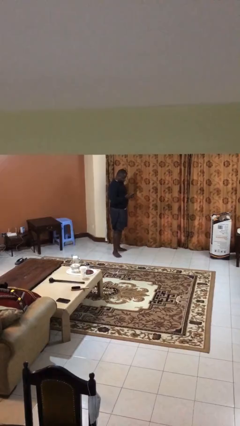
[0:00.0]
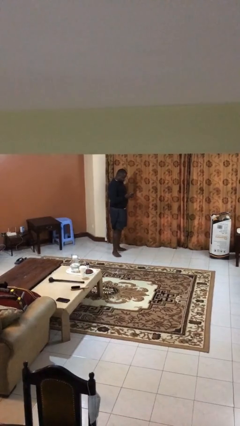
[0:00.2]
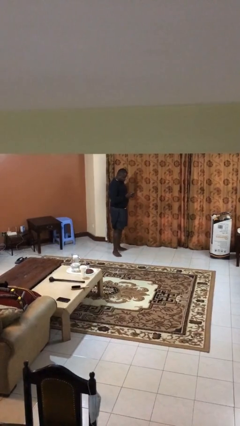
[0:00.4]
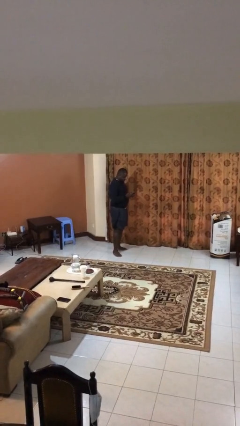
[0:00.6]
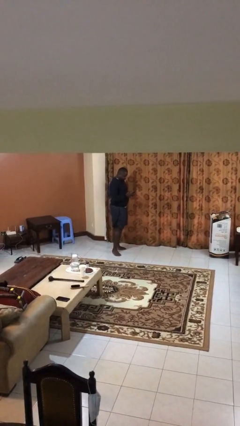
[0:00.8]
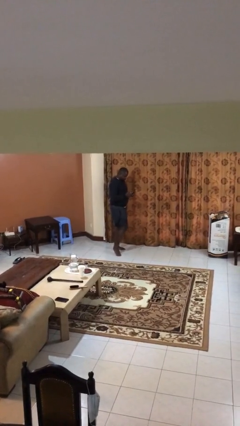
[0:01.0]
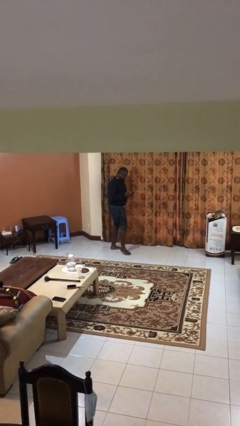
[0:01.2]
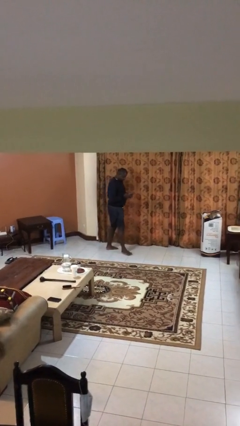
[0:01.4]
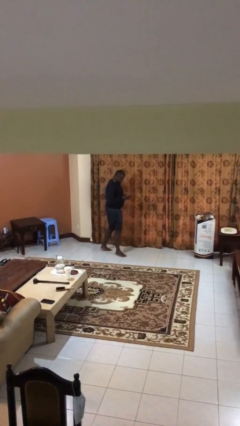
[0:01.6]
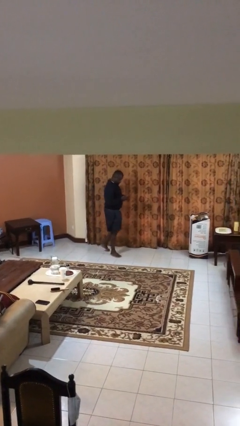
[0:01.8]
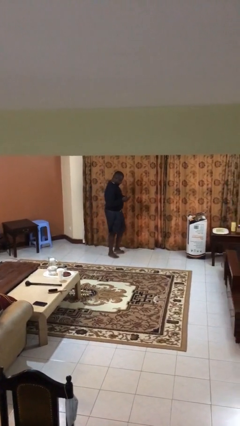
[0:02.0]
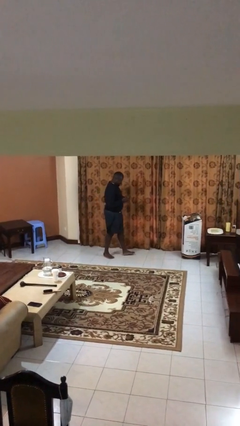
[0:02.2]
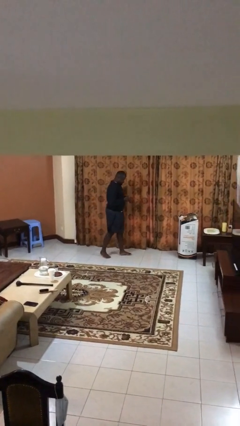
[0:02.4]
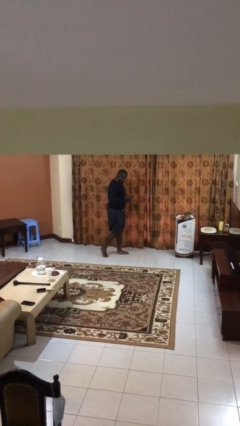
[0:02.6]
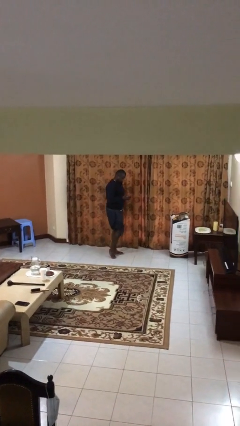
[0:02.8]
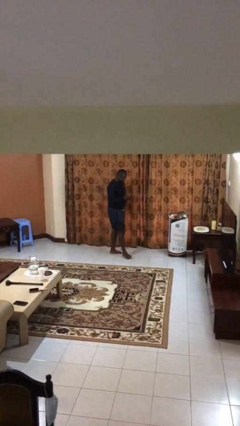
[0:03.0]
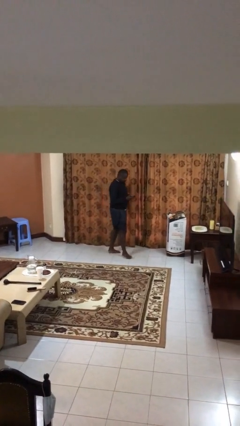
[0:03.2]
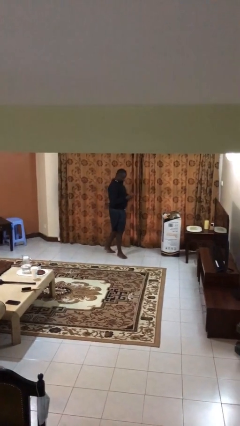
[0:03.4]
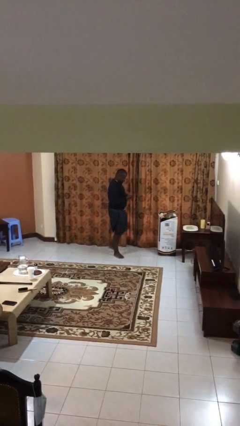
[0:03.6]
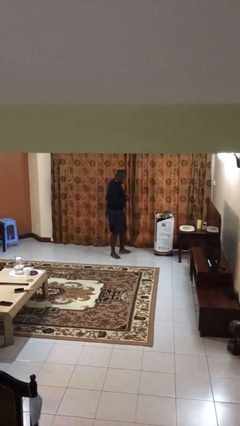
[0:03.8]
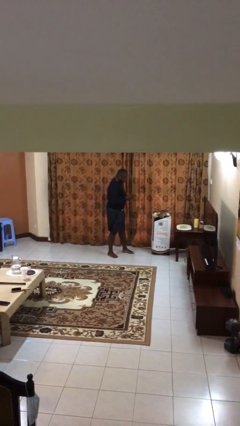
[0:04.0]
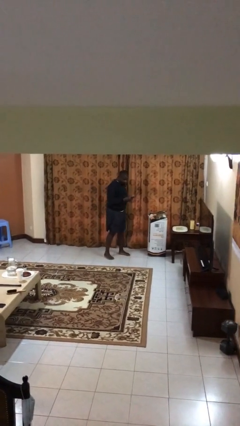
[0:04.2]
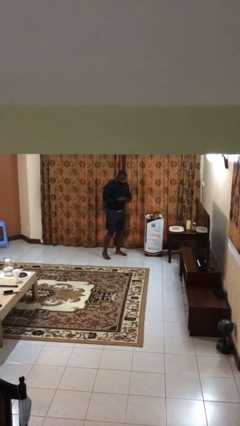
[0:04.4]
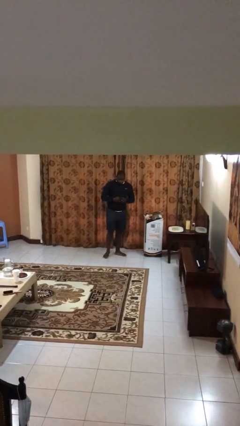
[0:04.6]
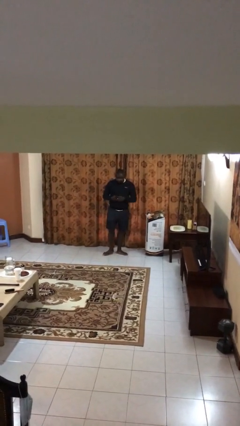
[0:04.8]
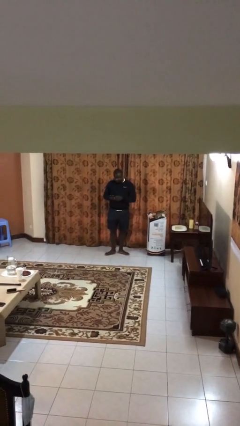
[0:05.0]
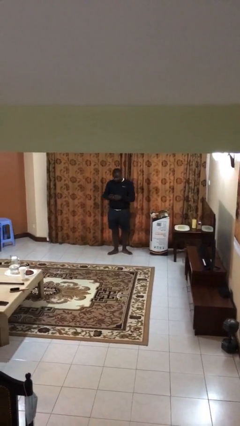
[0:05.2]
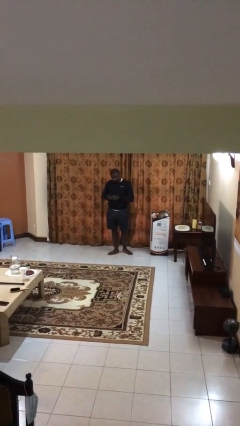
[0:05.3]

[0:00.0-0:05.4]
person texts on phone

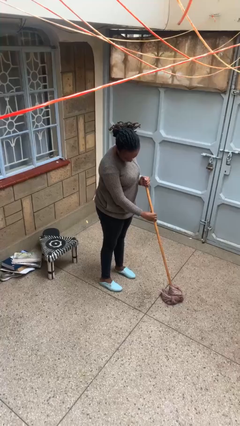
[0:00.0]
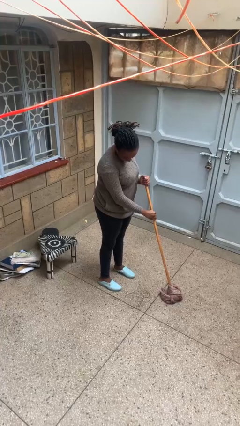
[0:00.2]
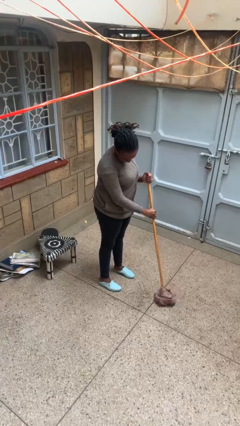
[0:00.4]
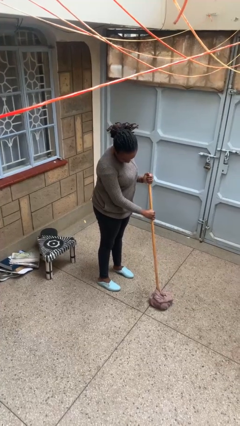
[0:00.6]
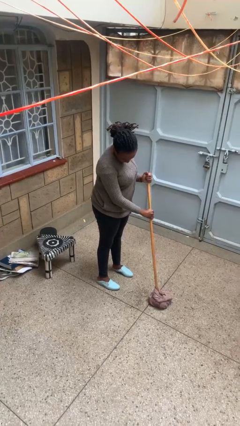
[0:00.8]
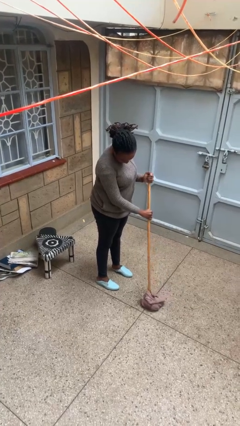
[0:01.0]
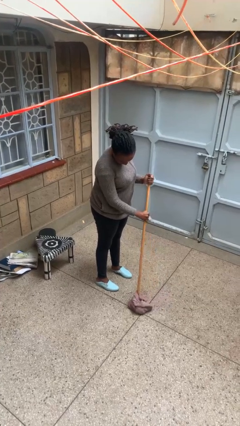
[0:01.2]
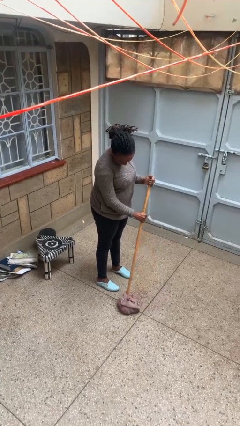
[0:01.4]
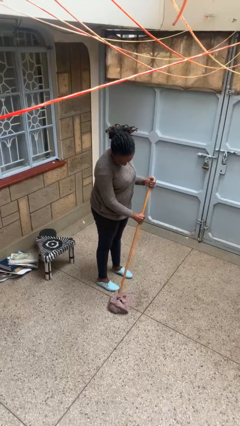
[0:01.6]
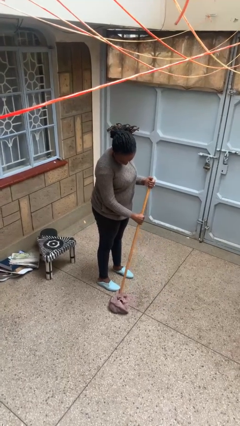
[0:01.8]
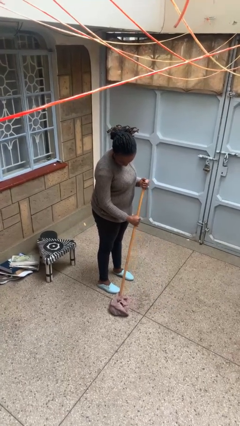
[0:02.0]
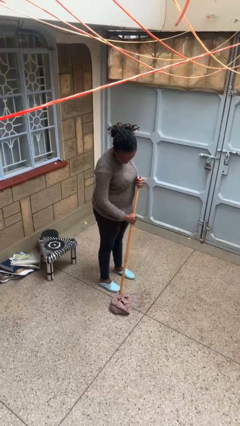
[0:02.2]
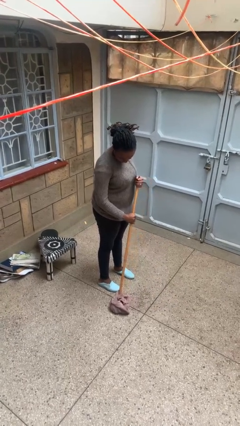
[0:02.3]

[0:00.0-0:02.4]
person mops

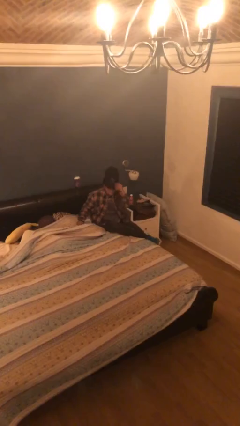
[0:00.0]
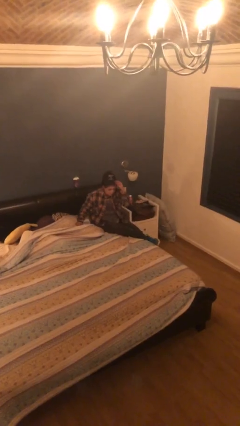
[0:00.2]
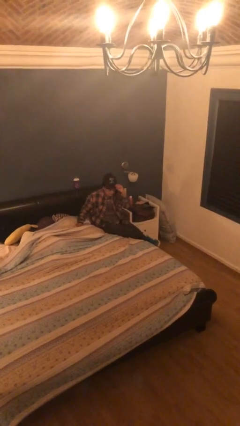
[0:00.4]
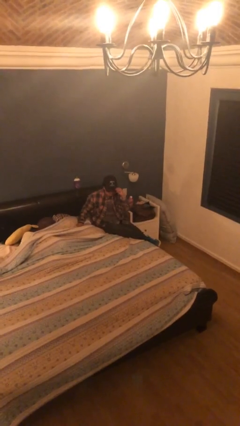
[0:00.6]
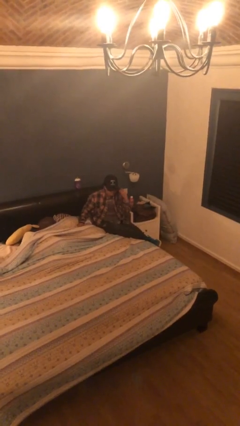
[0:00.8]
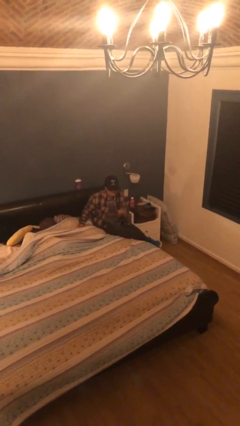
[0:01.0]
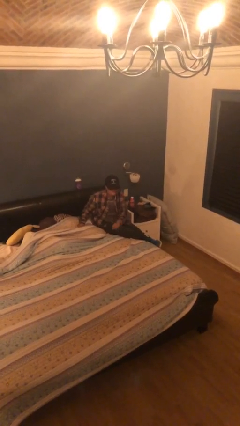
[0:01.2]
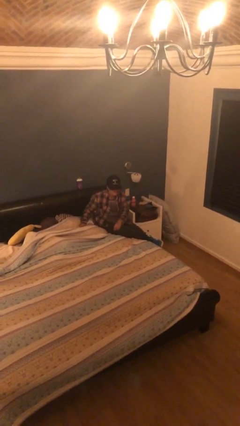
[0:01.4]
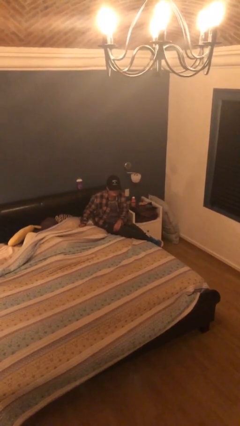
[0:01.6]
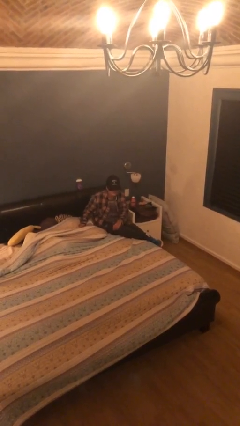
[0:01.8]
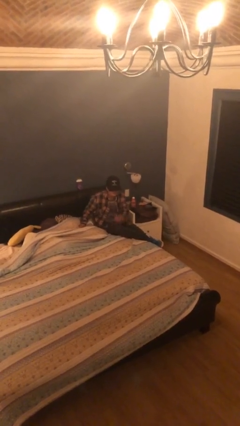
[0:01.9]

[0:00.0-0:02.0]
person puts on hat

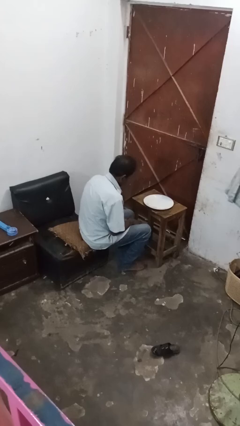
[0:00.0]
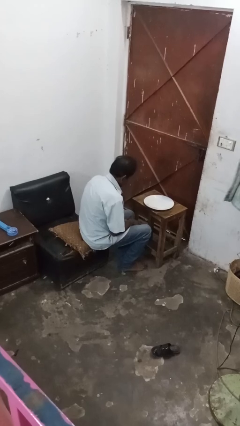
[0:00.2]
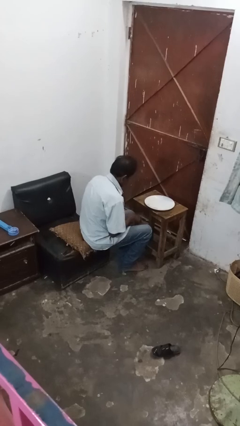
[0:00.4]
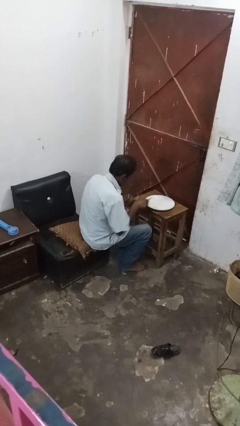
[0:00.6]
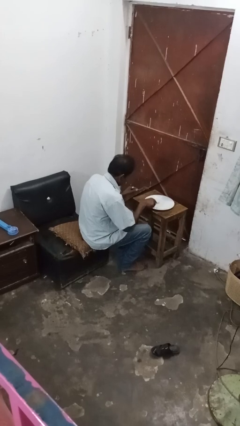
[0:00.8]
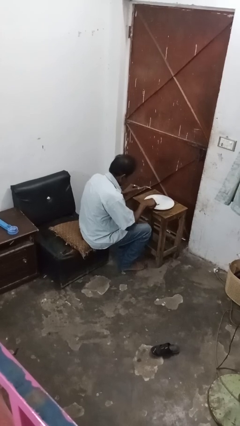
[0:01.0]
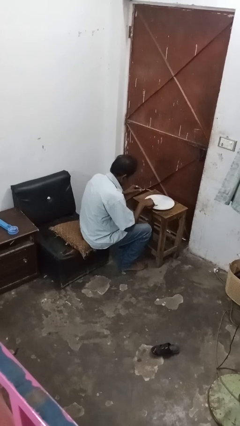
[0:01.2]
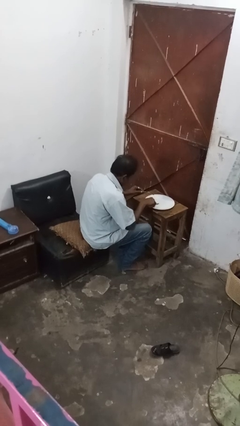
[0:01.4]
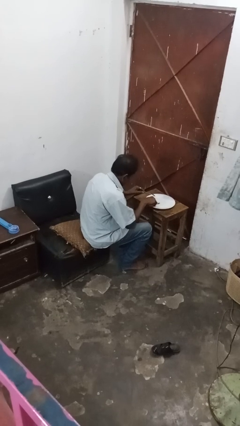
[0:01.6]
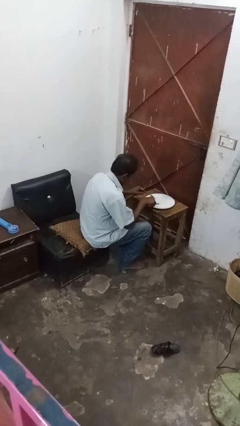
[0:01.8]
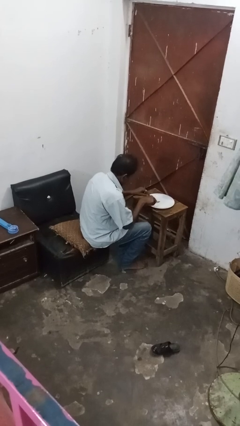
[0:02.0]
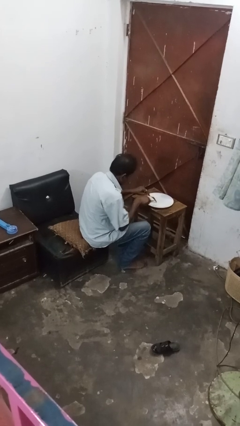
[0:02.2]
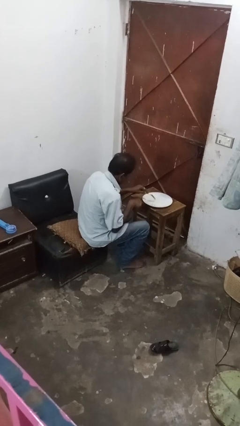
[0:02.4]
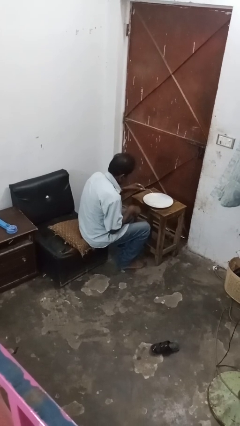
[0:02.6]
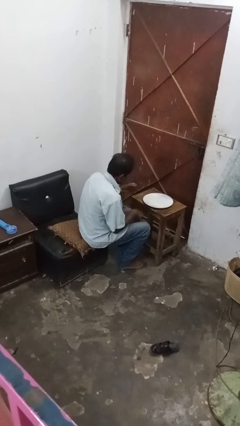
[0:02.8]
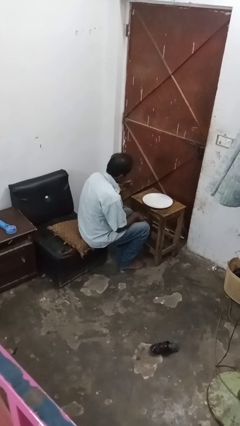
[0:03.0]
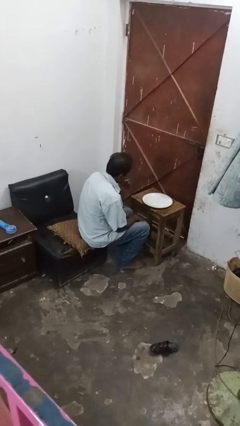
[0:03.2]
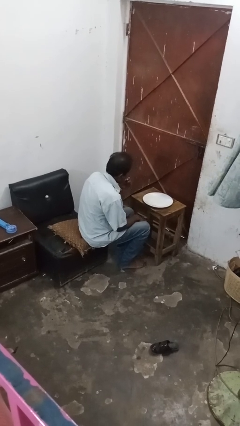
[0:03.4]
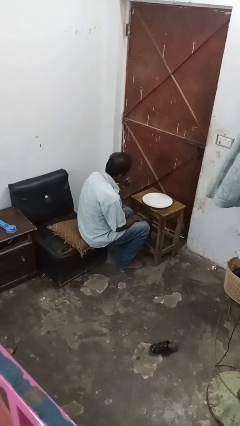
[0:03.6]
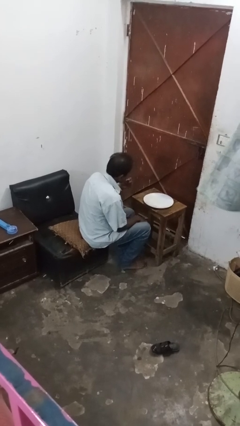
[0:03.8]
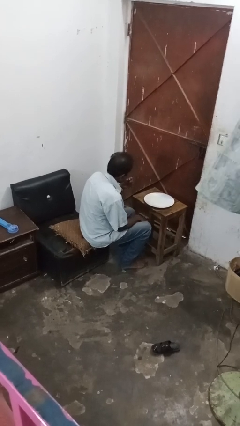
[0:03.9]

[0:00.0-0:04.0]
person eats with utensil

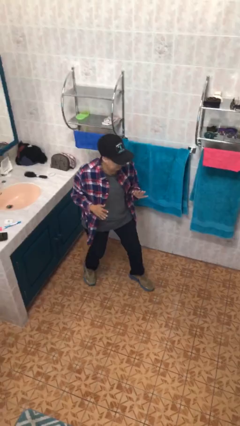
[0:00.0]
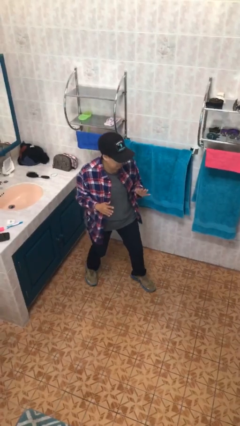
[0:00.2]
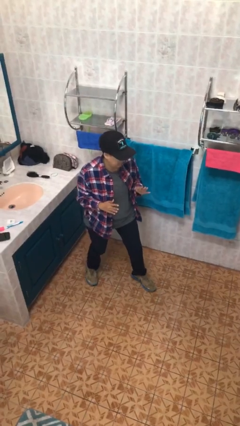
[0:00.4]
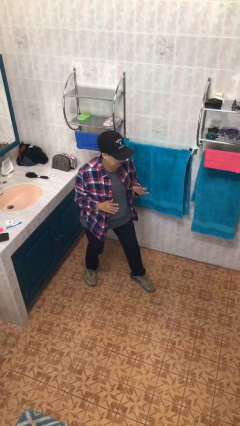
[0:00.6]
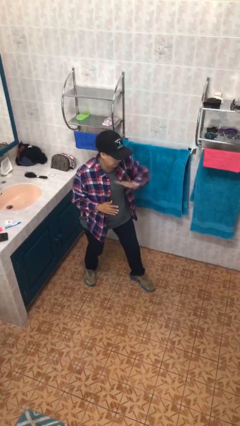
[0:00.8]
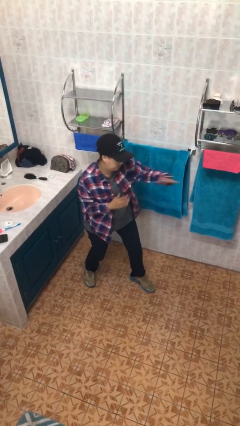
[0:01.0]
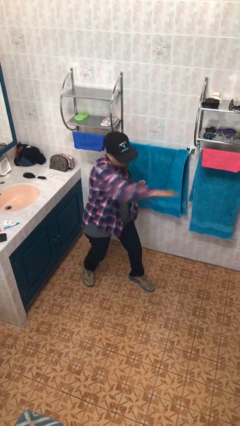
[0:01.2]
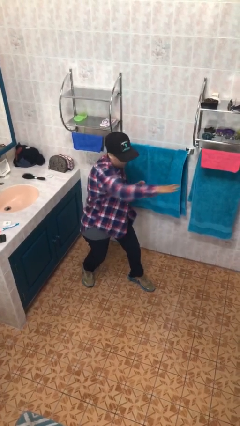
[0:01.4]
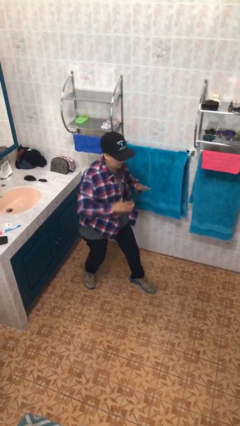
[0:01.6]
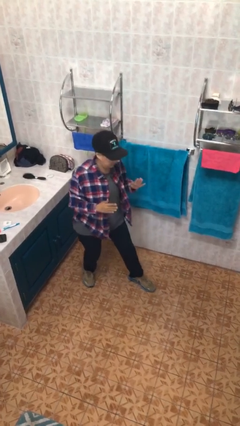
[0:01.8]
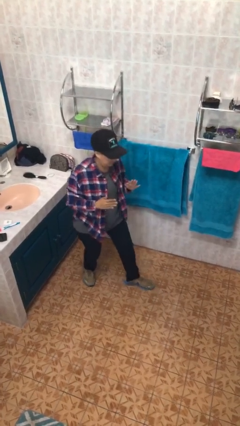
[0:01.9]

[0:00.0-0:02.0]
person karate chop

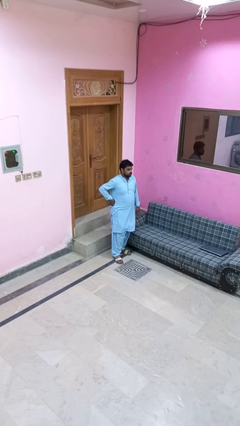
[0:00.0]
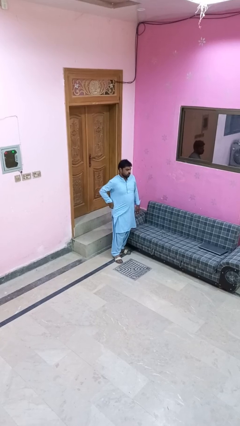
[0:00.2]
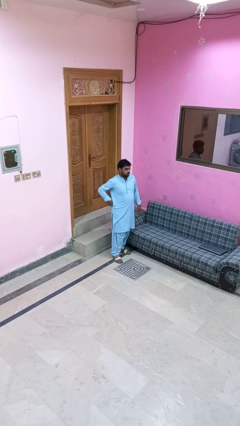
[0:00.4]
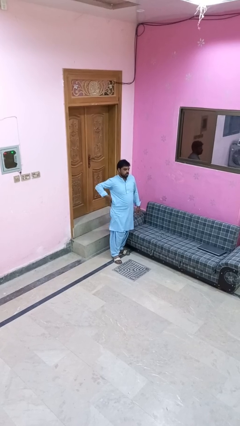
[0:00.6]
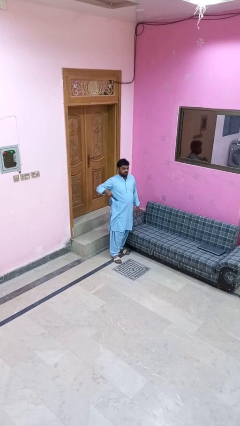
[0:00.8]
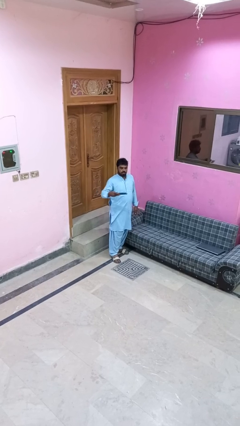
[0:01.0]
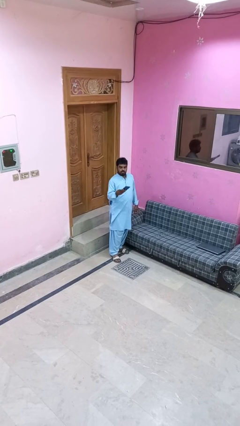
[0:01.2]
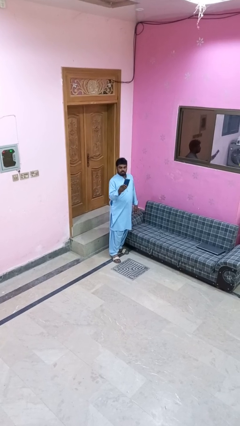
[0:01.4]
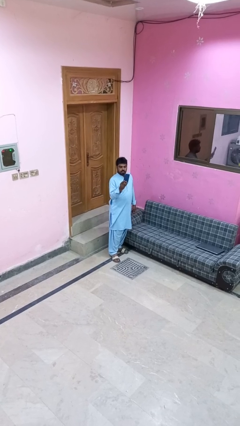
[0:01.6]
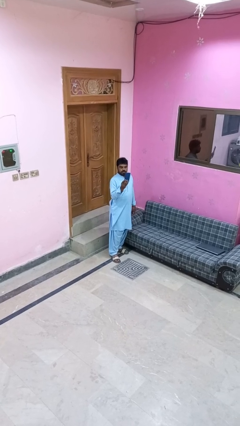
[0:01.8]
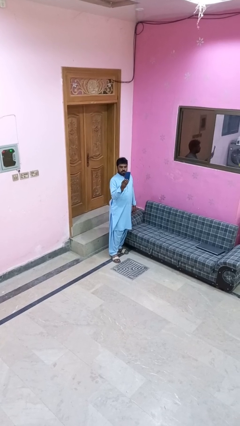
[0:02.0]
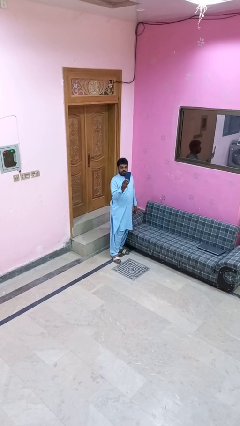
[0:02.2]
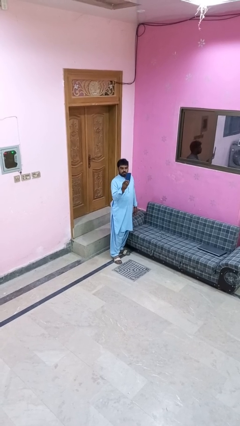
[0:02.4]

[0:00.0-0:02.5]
person takes phone from pocket
